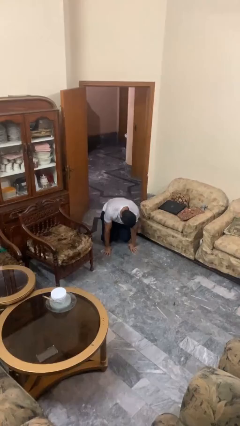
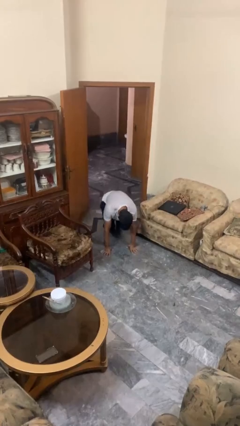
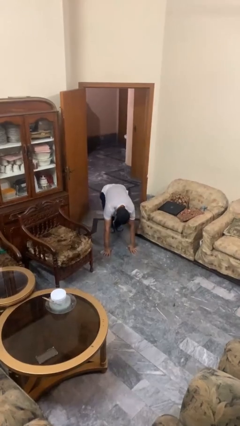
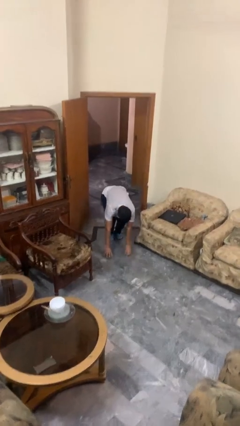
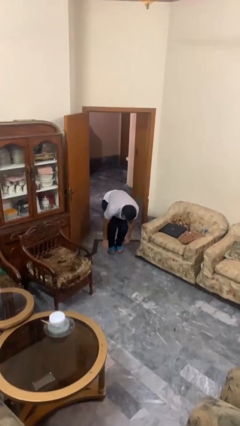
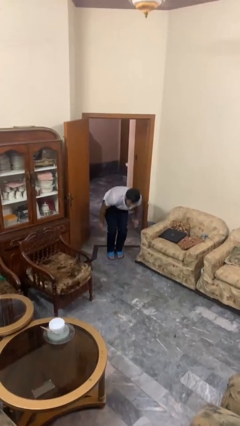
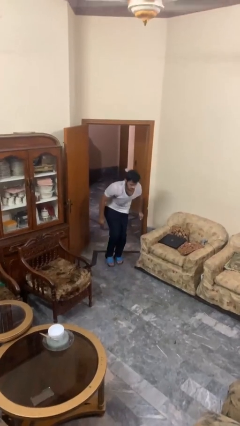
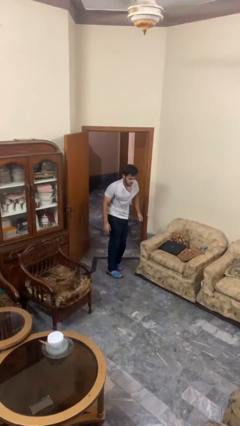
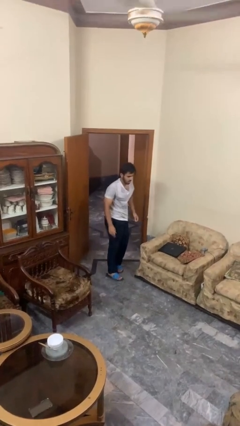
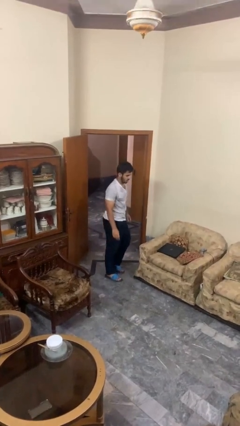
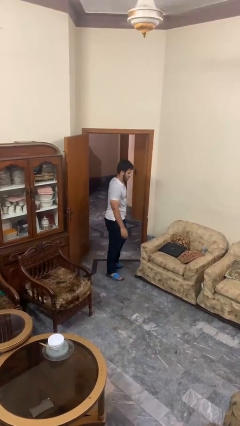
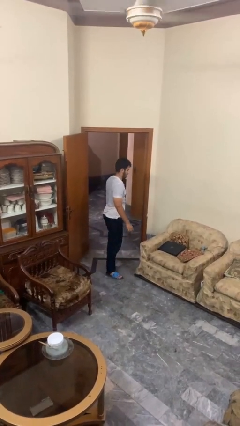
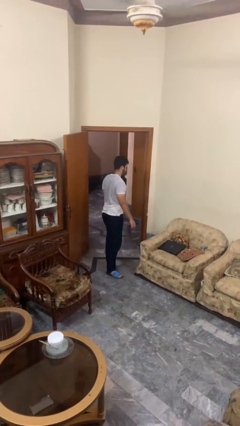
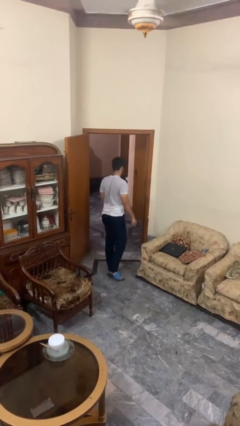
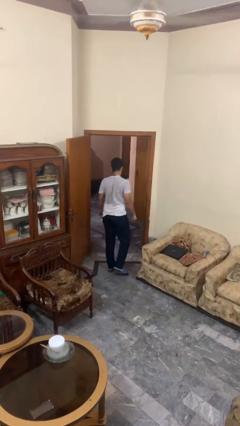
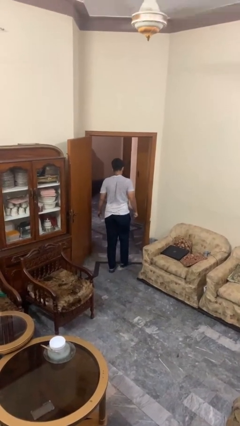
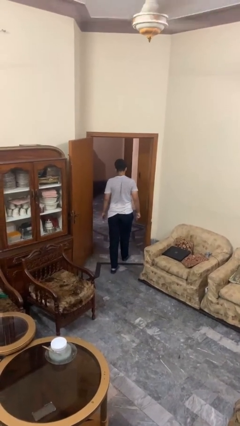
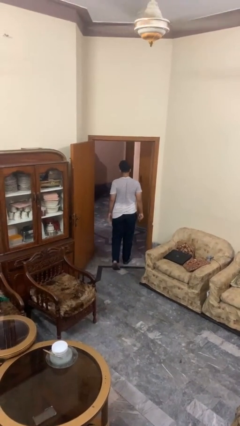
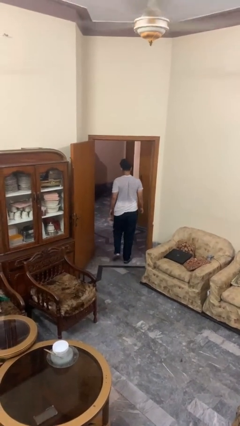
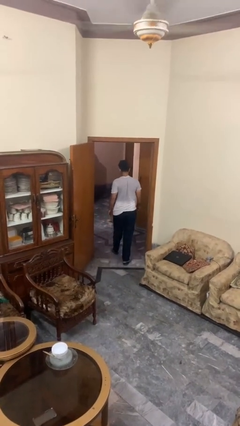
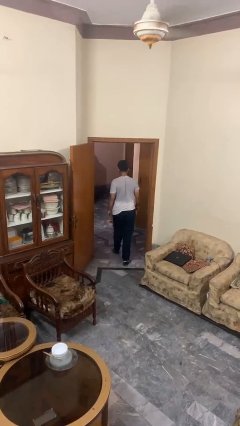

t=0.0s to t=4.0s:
person stands up from floor

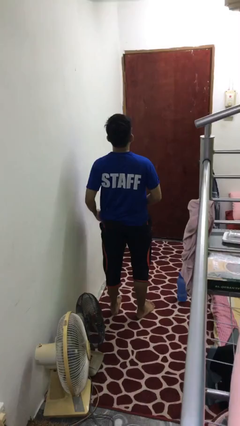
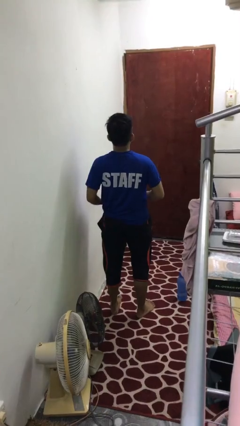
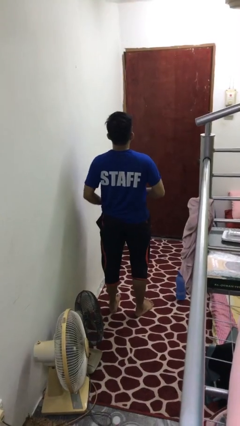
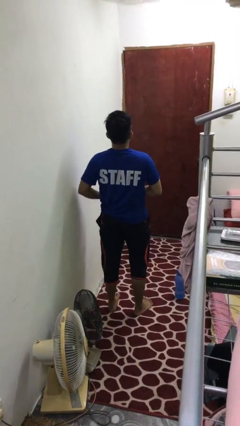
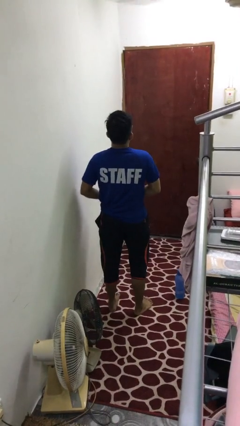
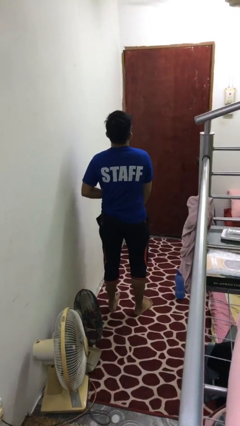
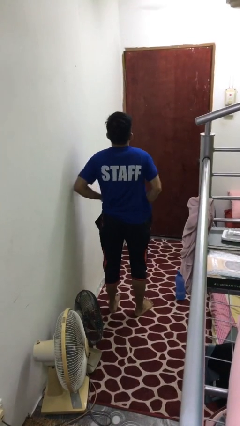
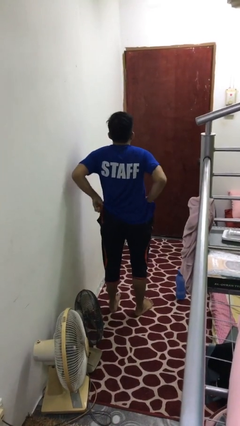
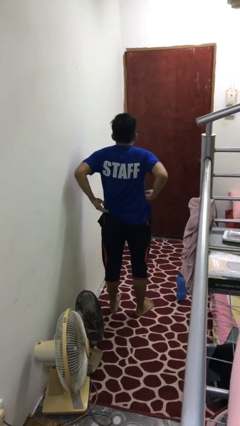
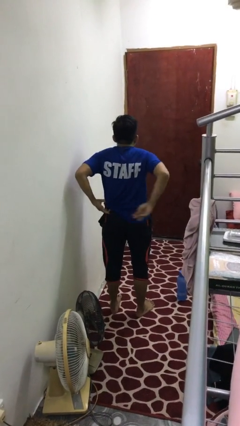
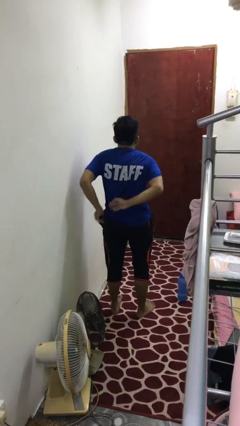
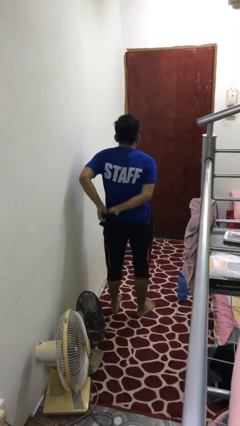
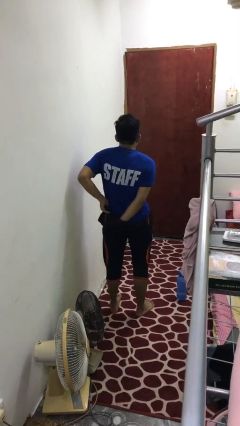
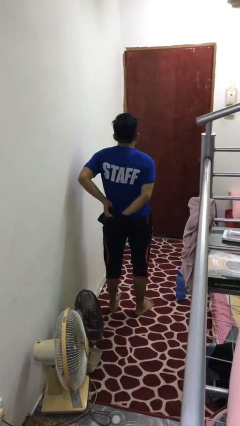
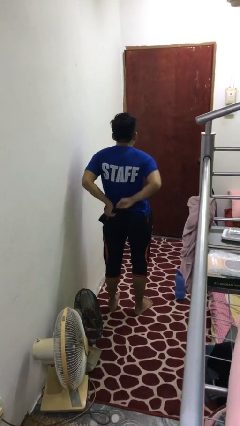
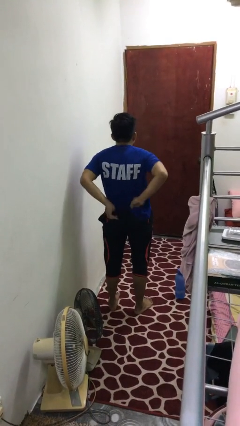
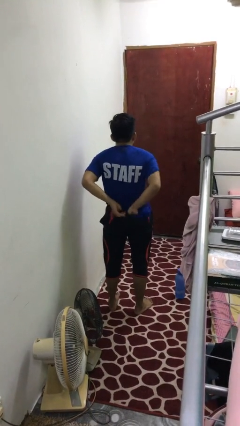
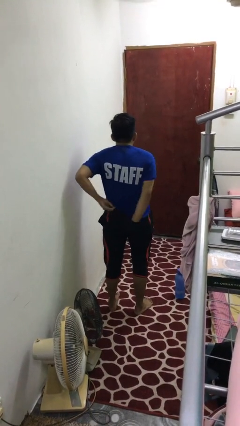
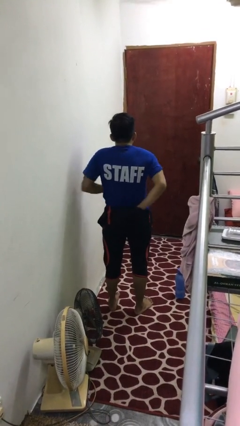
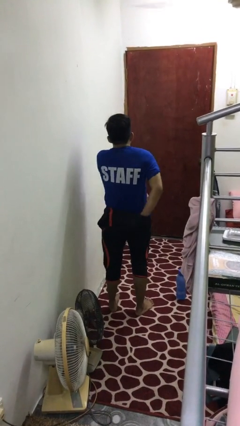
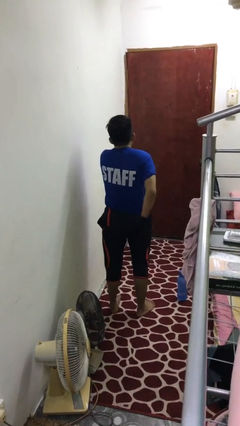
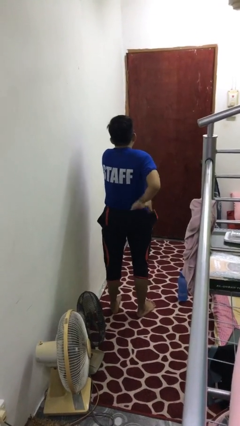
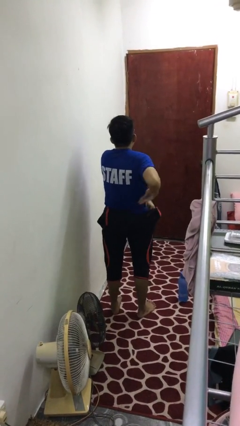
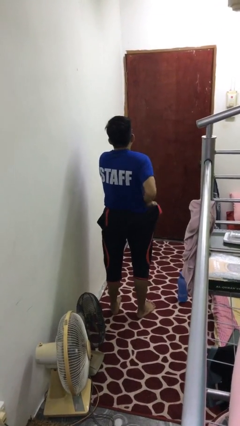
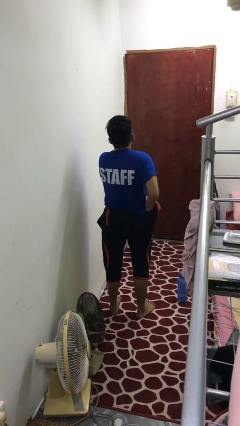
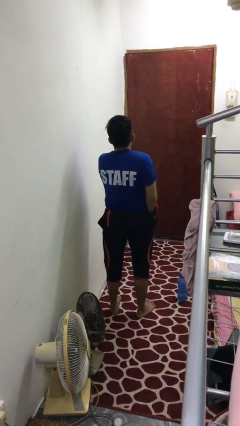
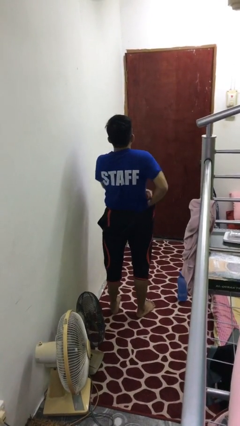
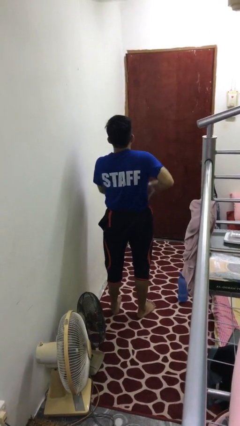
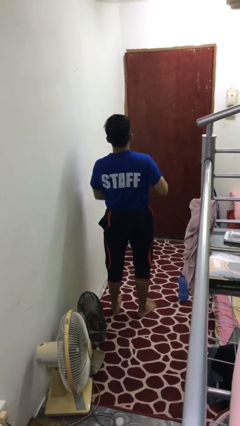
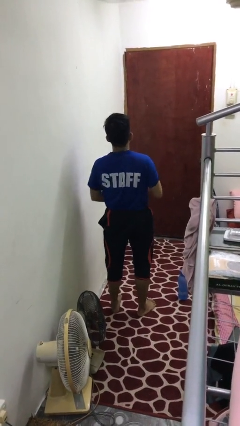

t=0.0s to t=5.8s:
person tucks in shirt

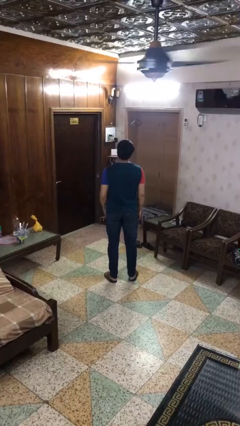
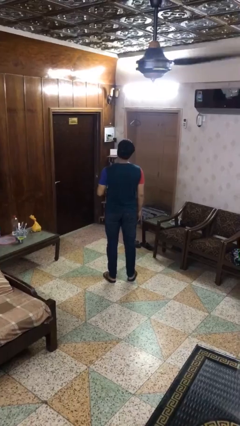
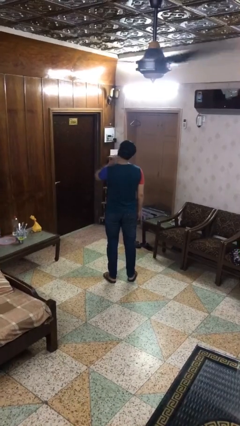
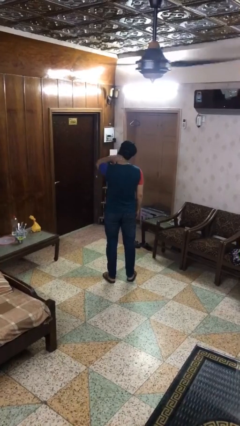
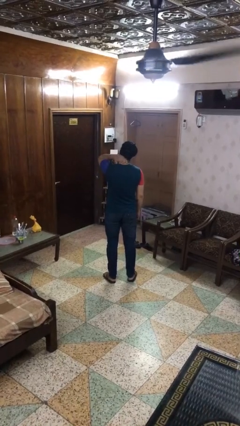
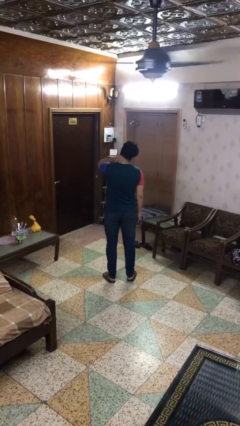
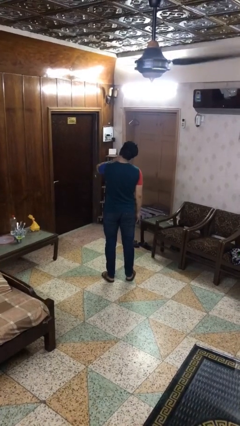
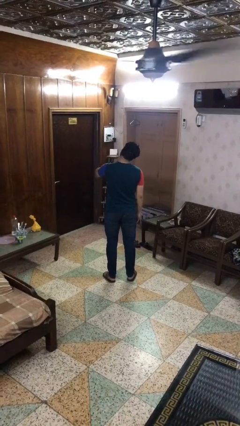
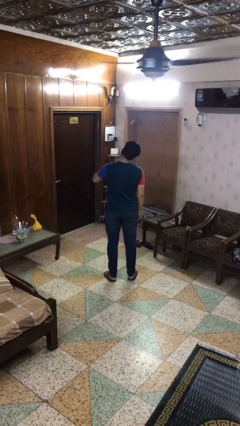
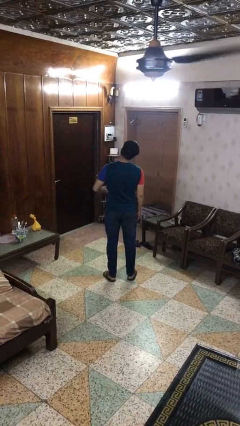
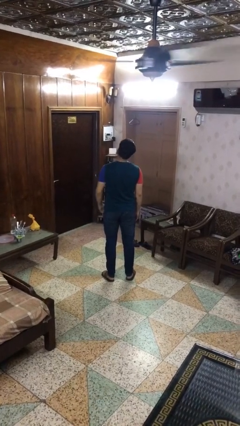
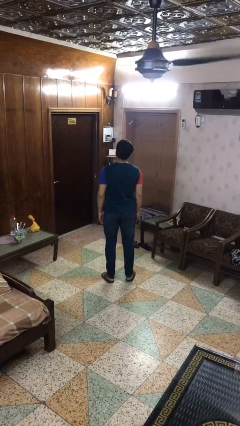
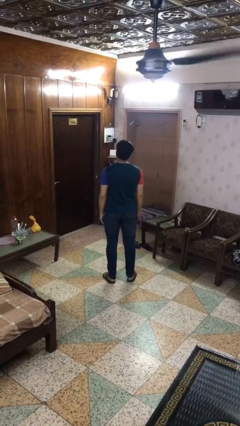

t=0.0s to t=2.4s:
person rubs neck

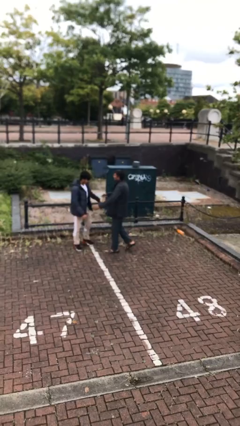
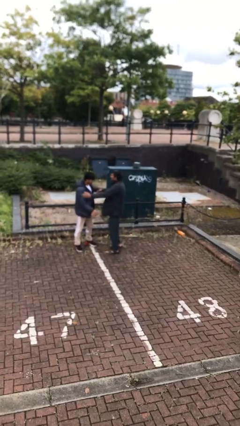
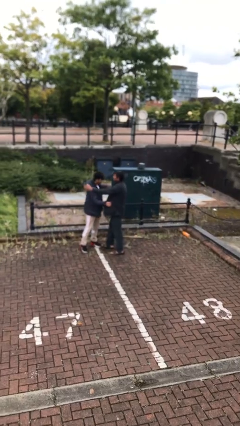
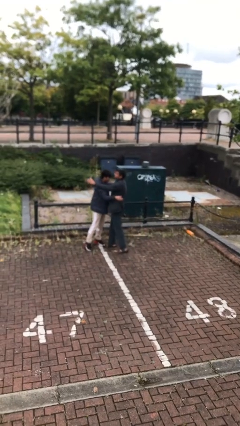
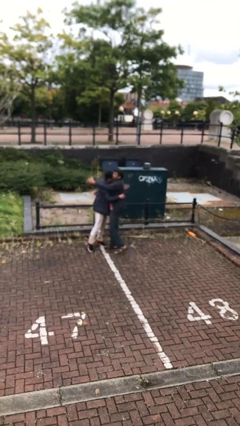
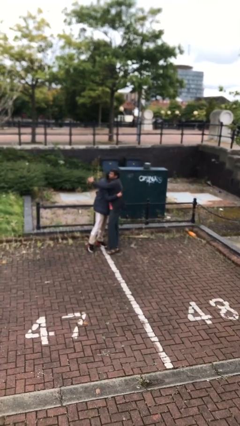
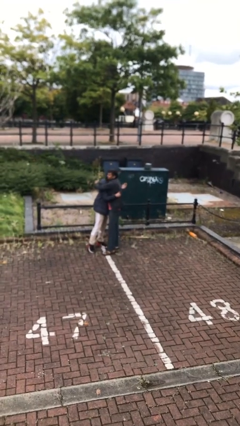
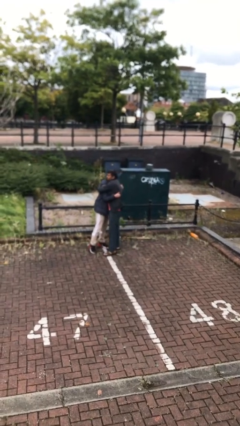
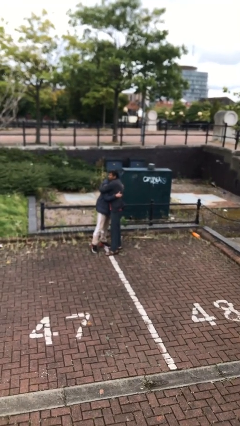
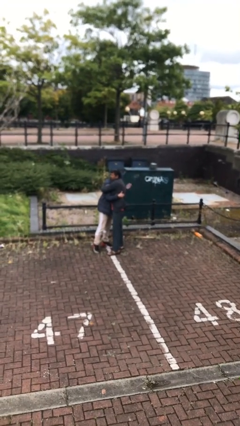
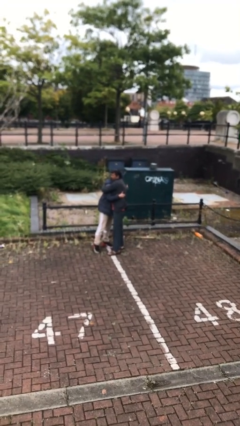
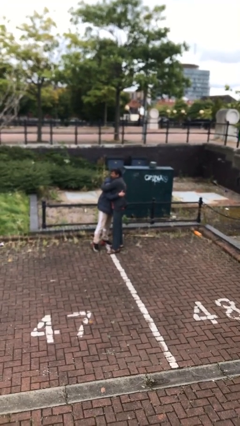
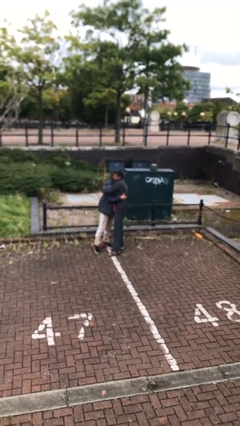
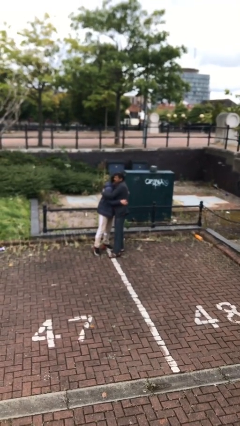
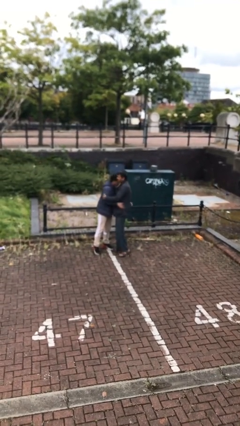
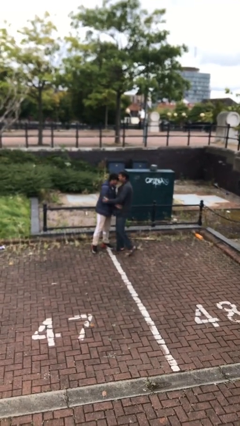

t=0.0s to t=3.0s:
person embraces person

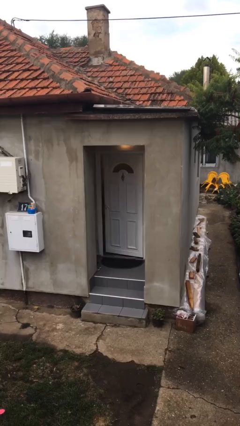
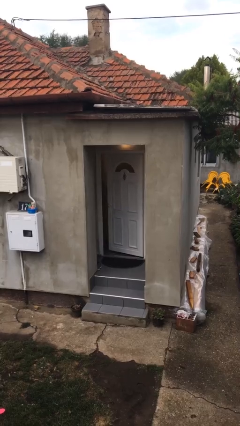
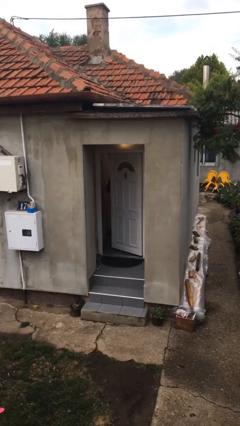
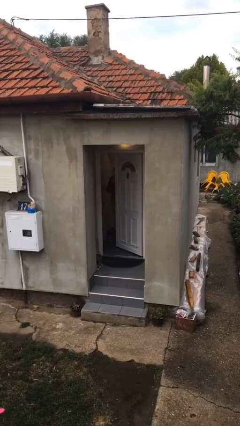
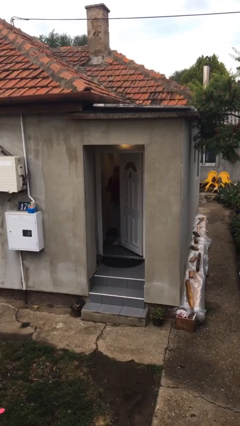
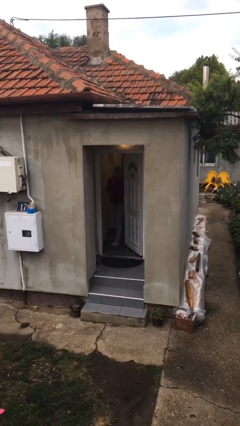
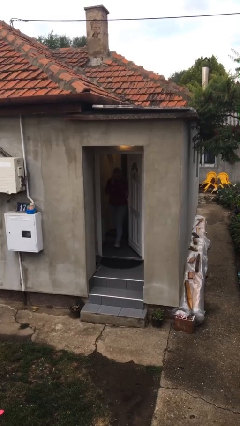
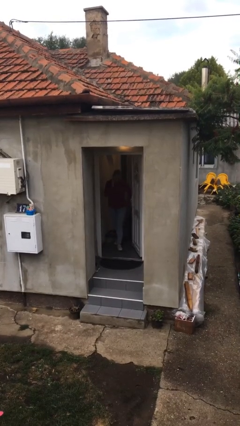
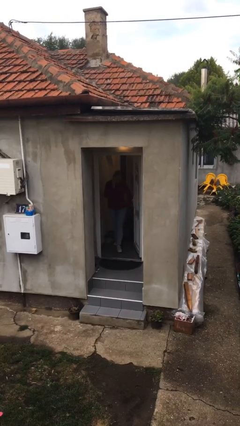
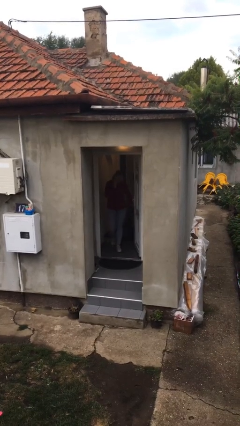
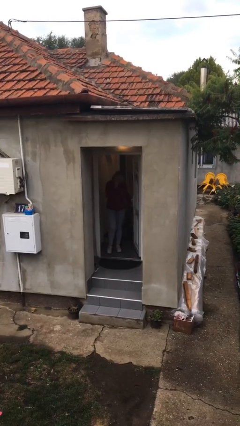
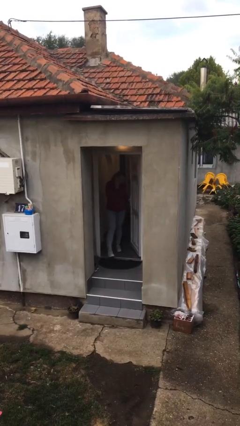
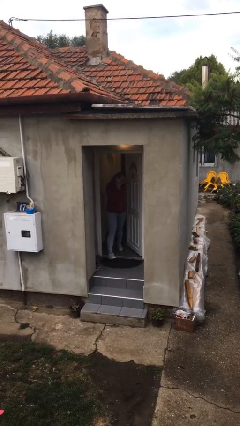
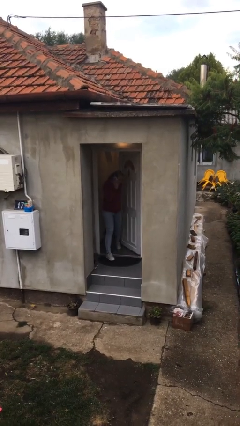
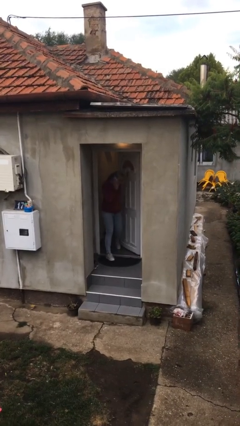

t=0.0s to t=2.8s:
person opens facility door
